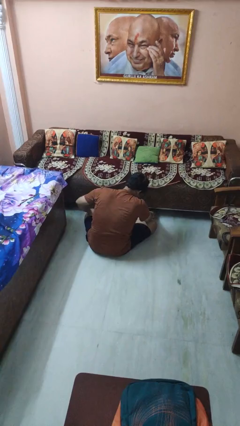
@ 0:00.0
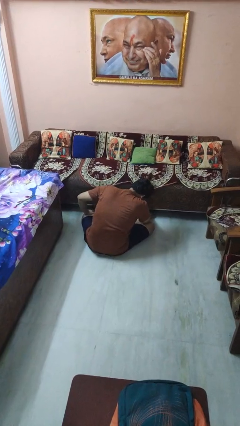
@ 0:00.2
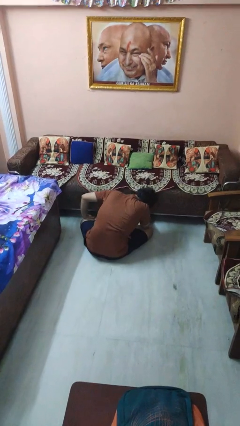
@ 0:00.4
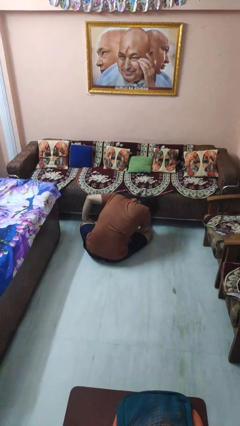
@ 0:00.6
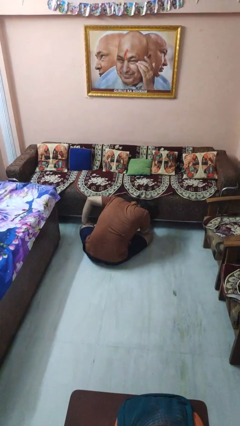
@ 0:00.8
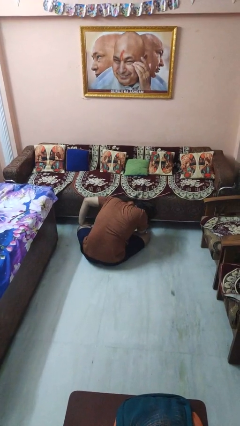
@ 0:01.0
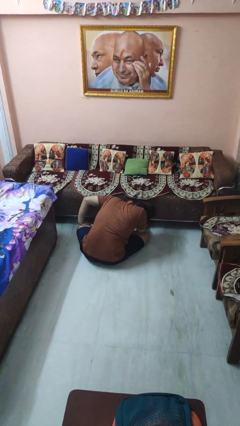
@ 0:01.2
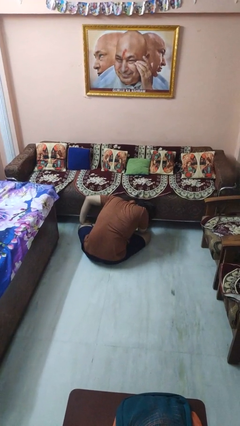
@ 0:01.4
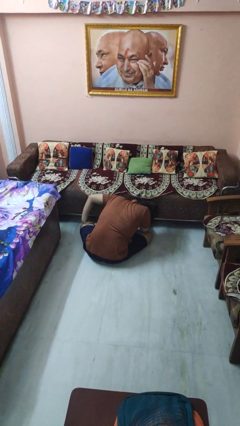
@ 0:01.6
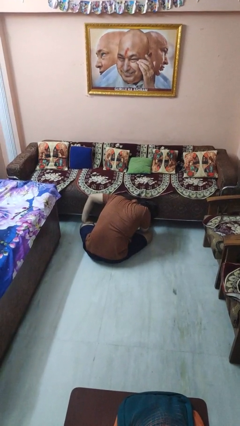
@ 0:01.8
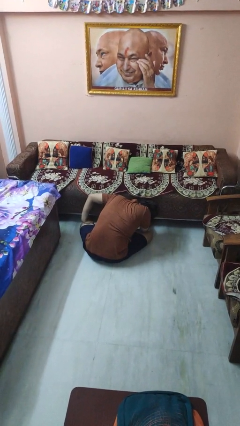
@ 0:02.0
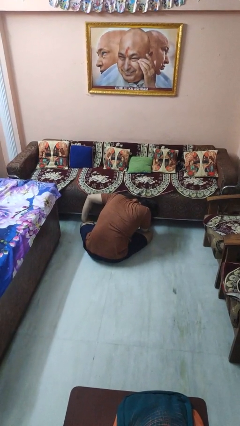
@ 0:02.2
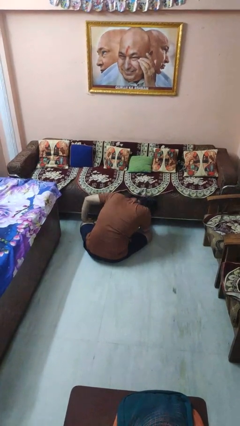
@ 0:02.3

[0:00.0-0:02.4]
person searches under couch

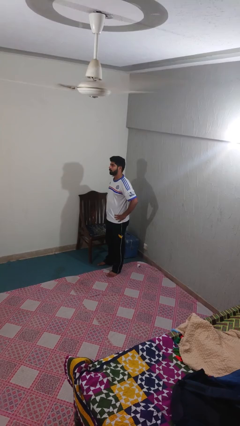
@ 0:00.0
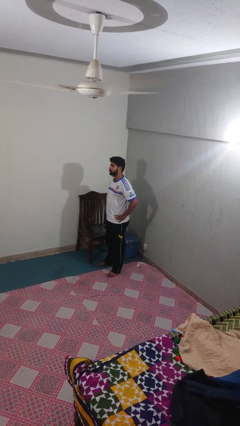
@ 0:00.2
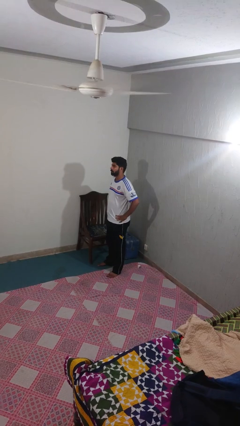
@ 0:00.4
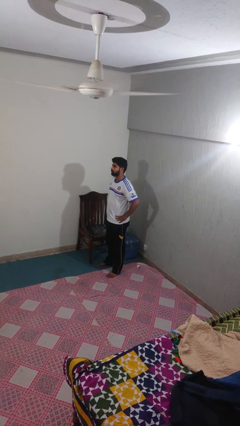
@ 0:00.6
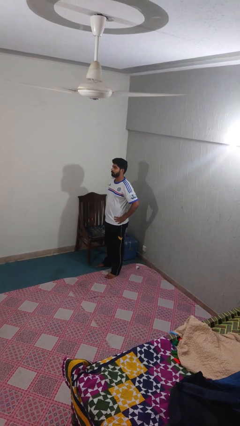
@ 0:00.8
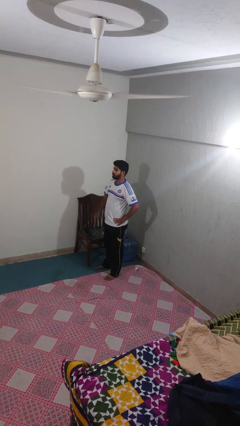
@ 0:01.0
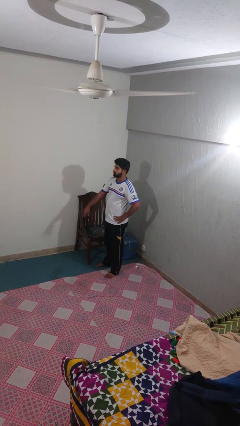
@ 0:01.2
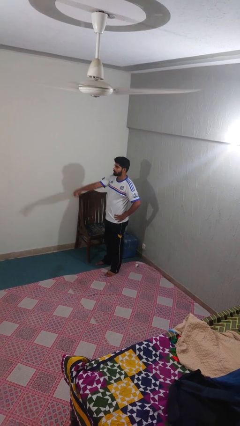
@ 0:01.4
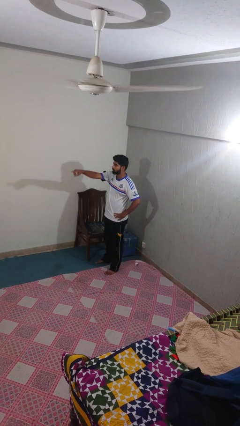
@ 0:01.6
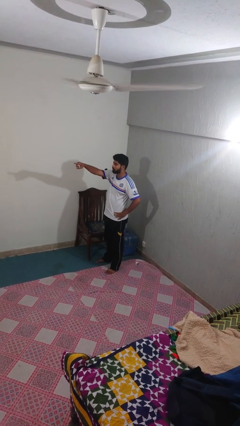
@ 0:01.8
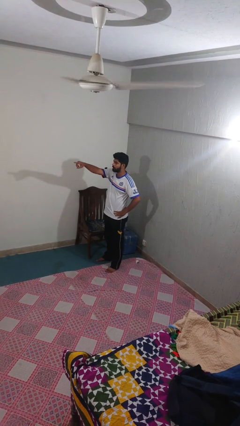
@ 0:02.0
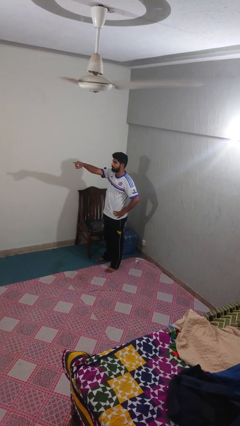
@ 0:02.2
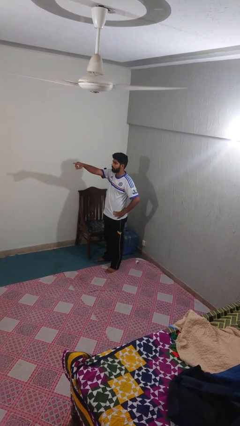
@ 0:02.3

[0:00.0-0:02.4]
person points at person

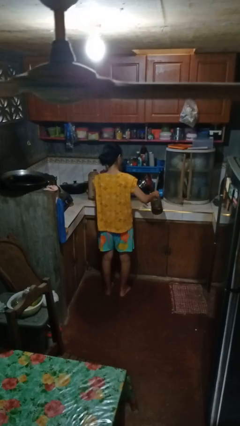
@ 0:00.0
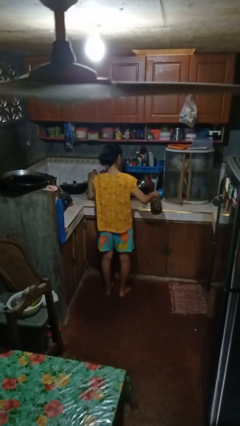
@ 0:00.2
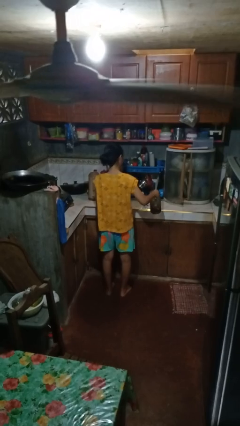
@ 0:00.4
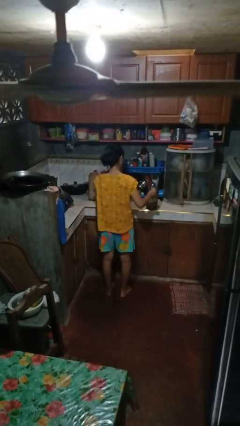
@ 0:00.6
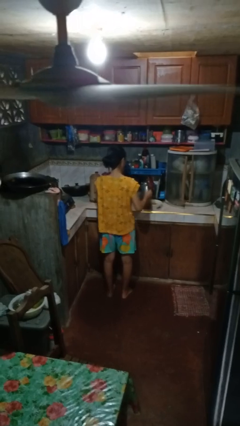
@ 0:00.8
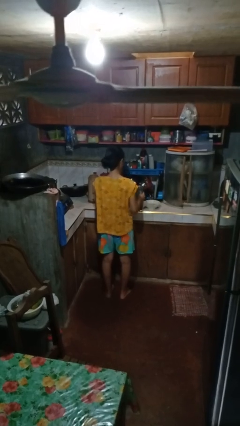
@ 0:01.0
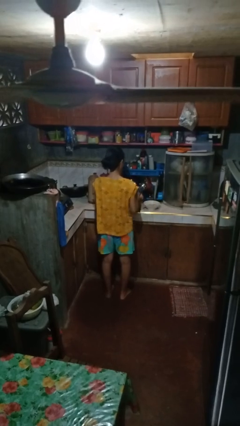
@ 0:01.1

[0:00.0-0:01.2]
person pours into bowl

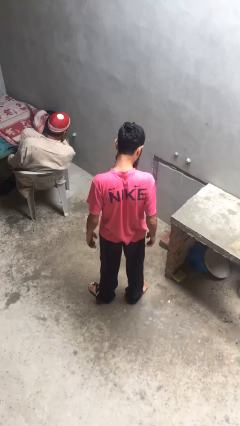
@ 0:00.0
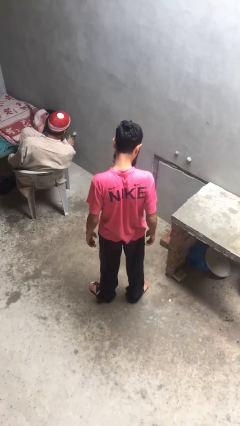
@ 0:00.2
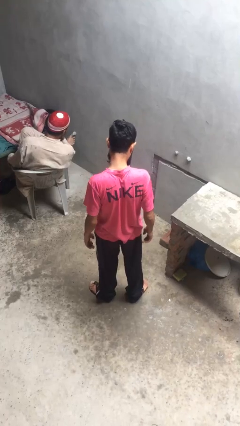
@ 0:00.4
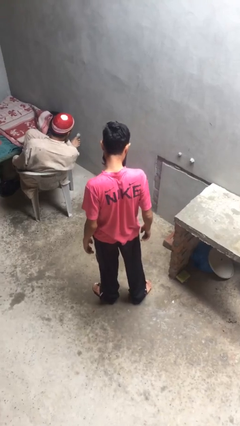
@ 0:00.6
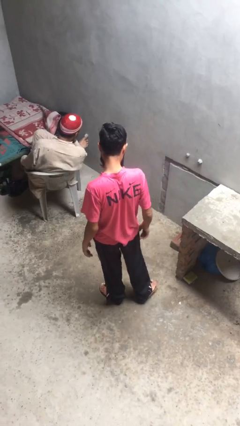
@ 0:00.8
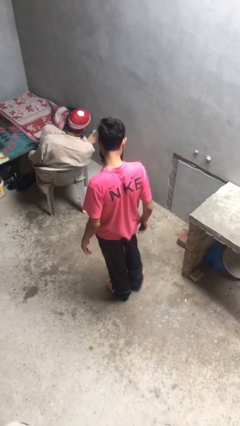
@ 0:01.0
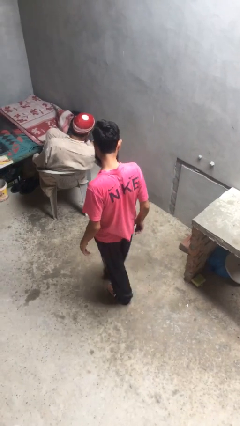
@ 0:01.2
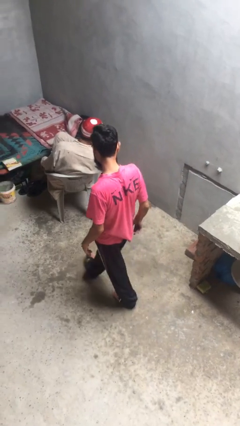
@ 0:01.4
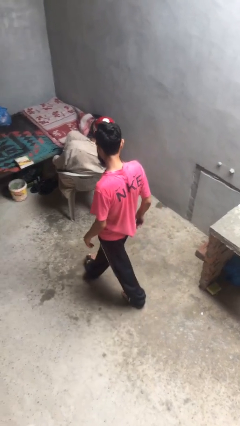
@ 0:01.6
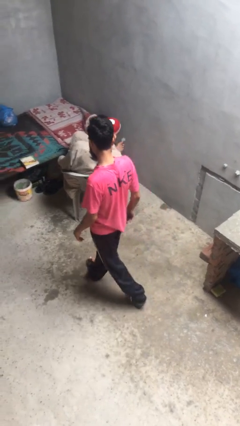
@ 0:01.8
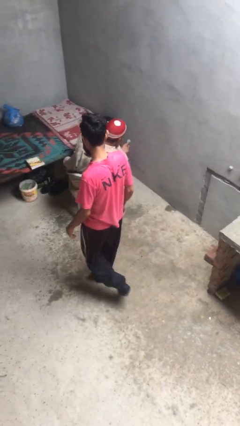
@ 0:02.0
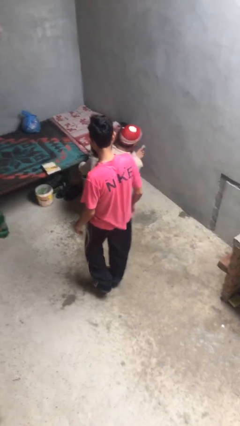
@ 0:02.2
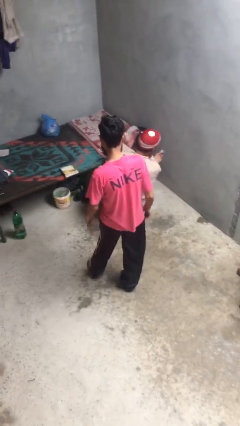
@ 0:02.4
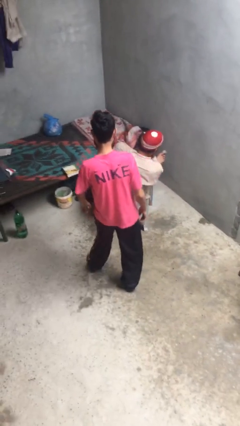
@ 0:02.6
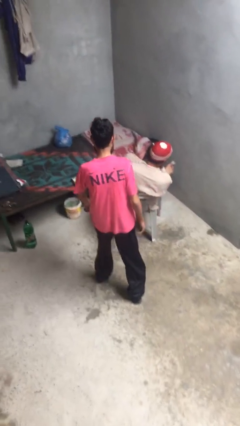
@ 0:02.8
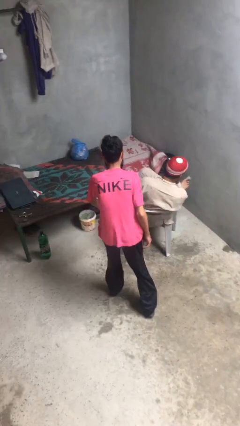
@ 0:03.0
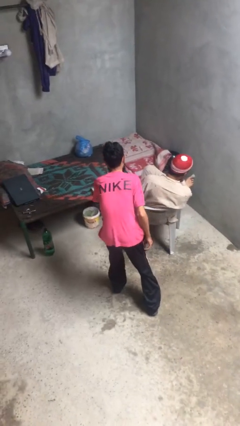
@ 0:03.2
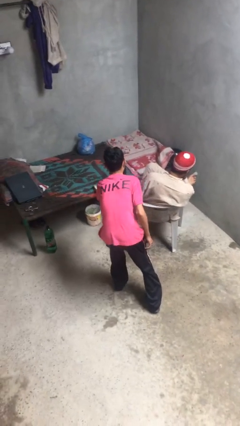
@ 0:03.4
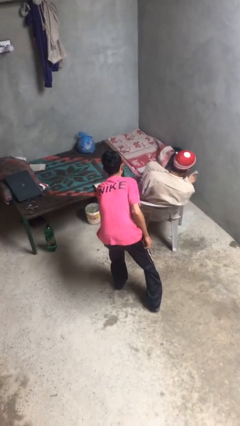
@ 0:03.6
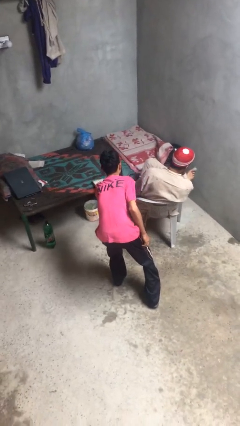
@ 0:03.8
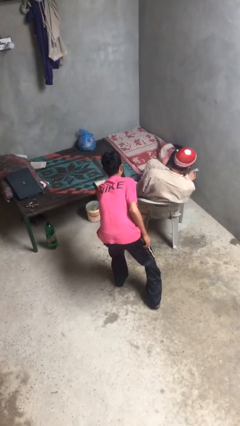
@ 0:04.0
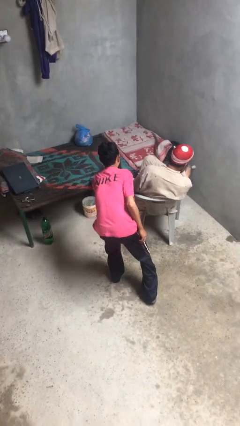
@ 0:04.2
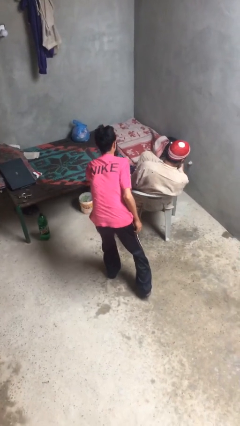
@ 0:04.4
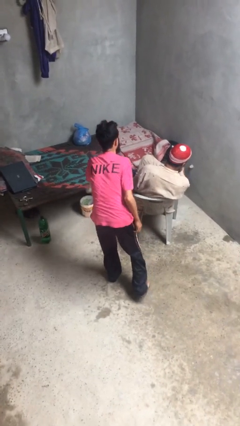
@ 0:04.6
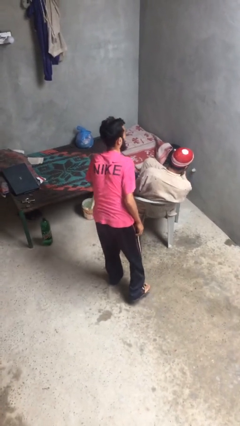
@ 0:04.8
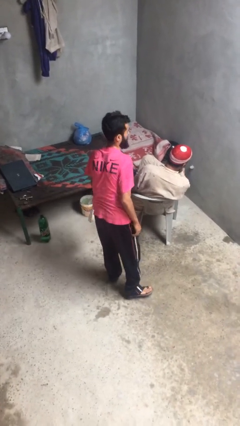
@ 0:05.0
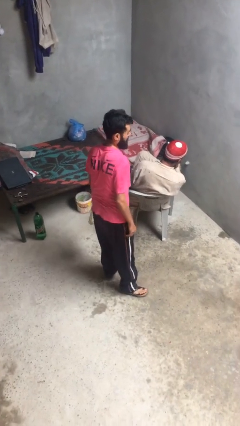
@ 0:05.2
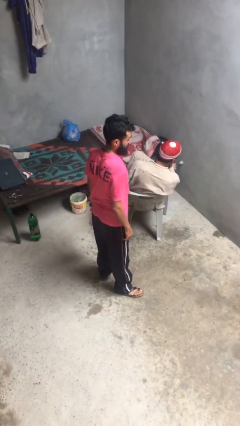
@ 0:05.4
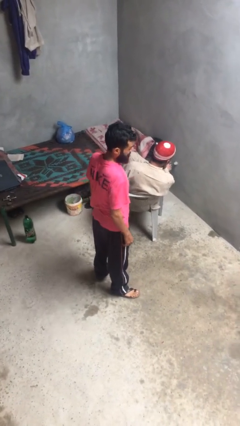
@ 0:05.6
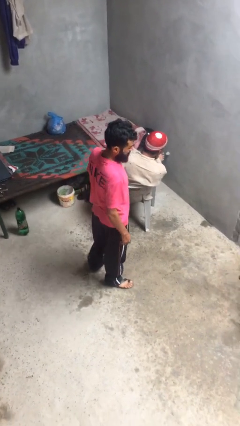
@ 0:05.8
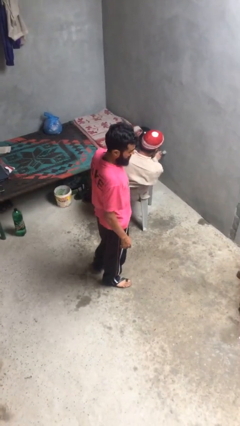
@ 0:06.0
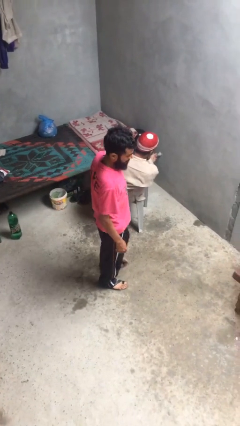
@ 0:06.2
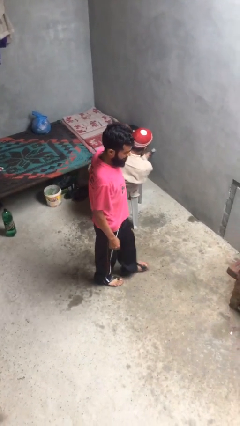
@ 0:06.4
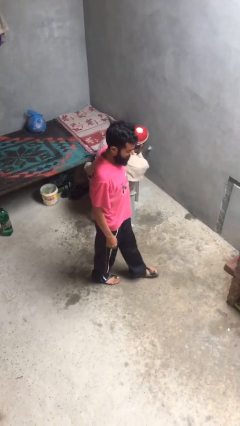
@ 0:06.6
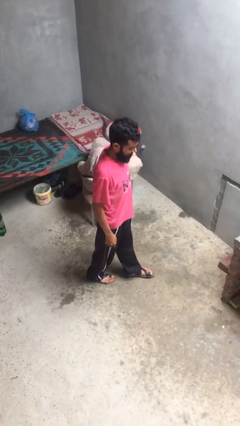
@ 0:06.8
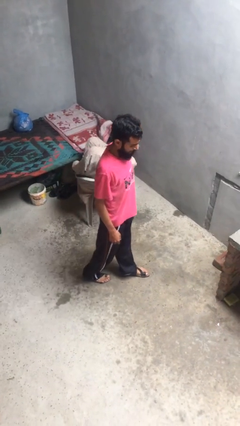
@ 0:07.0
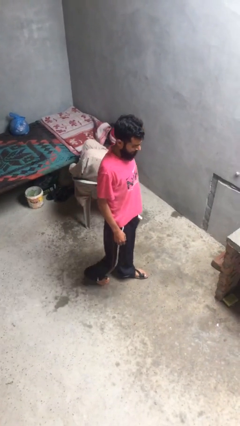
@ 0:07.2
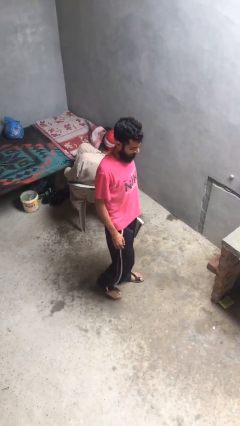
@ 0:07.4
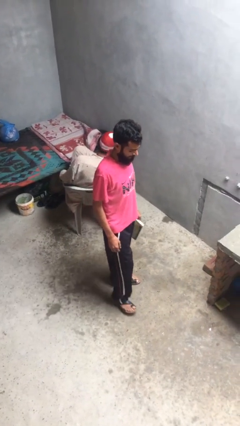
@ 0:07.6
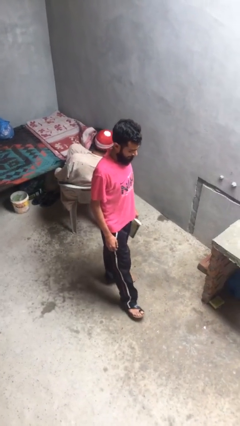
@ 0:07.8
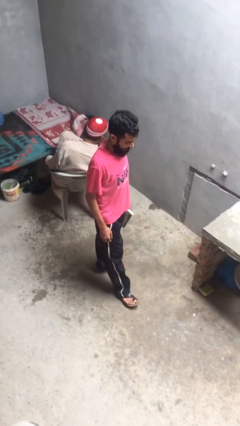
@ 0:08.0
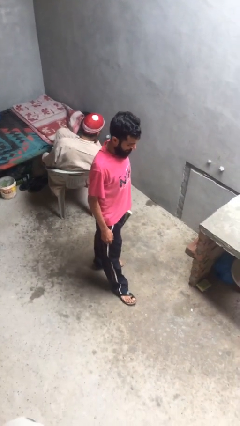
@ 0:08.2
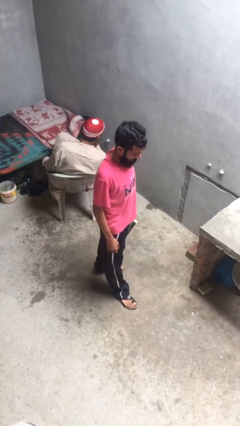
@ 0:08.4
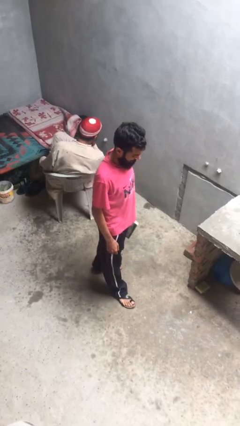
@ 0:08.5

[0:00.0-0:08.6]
person steals object from person

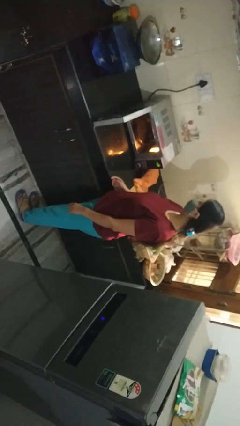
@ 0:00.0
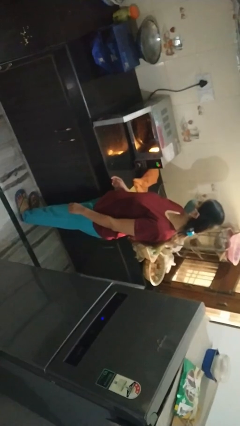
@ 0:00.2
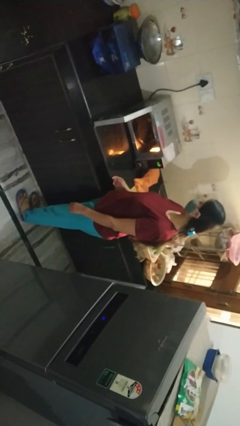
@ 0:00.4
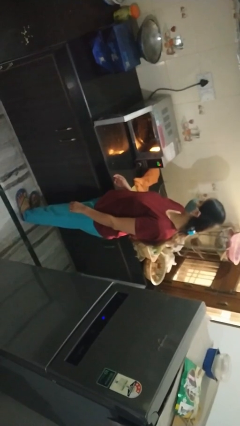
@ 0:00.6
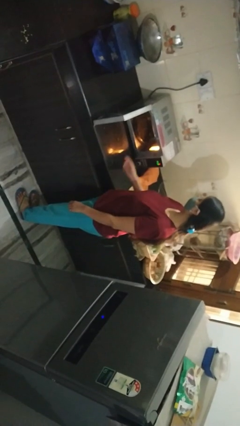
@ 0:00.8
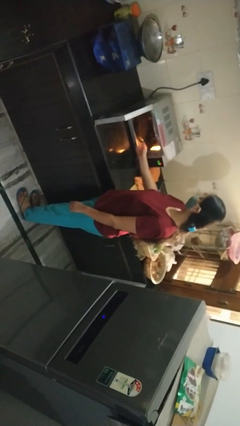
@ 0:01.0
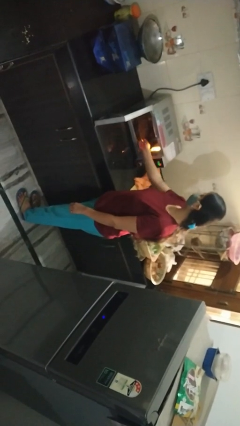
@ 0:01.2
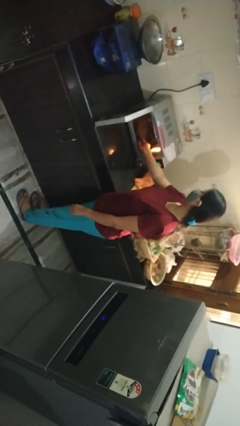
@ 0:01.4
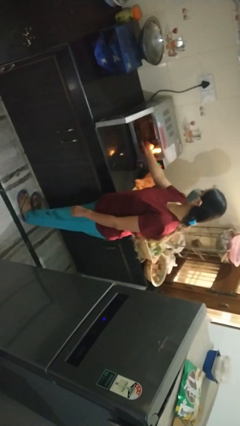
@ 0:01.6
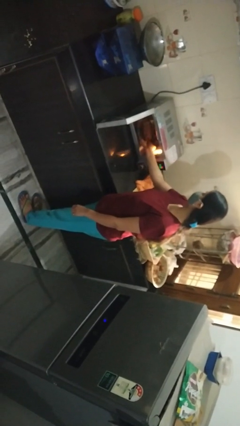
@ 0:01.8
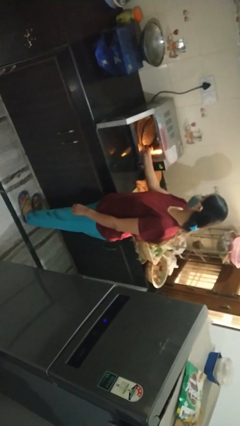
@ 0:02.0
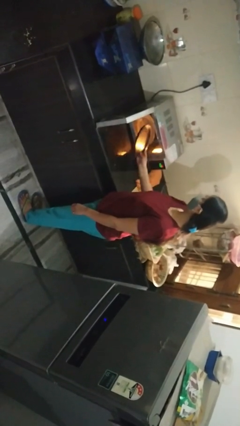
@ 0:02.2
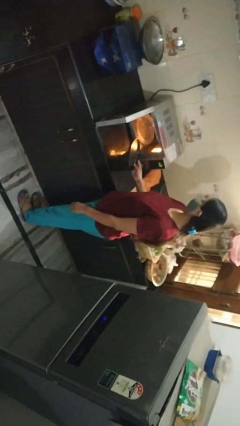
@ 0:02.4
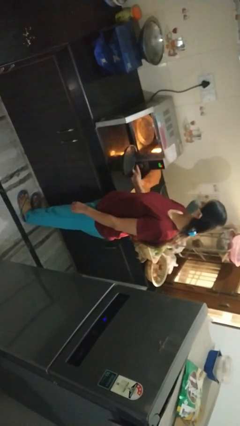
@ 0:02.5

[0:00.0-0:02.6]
person takes object from microwave
